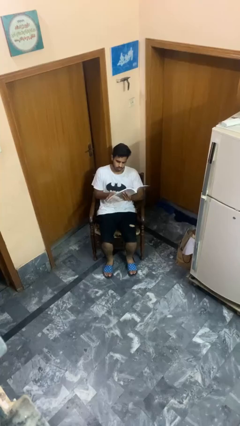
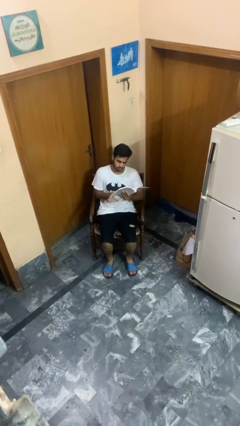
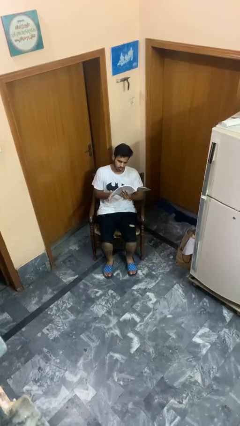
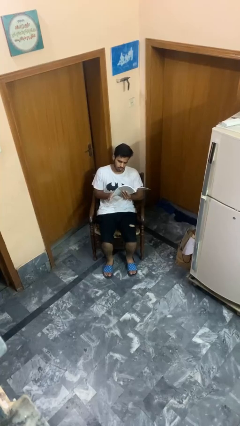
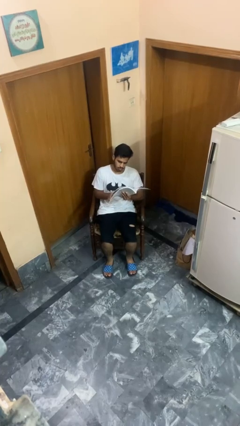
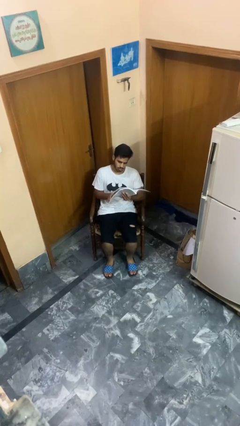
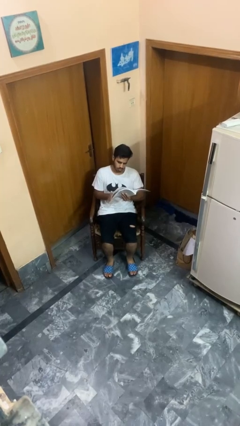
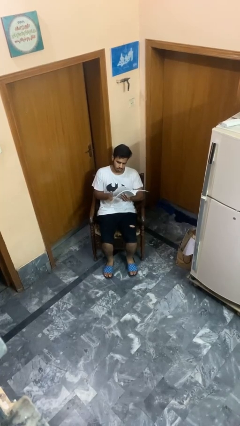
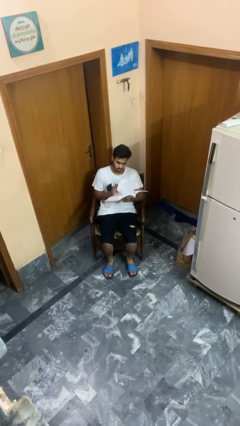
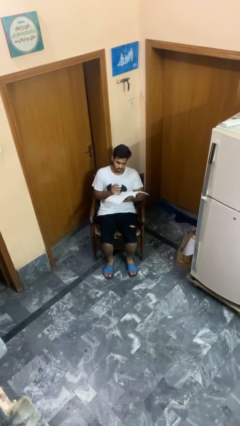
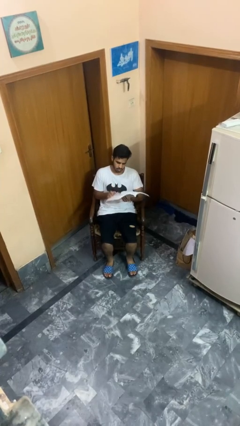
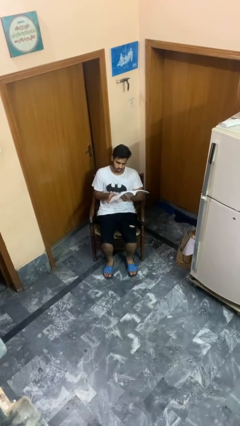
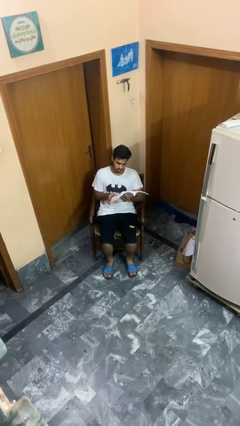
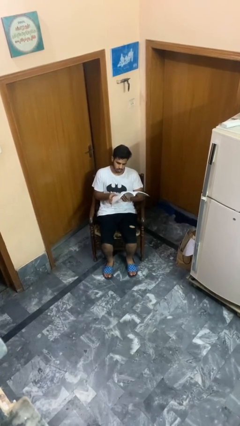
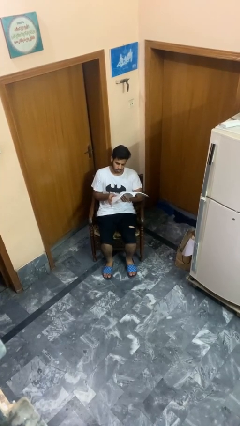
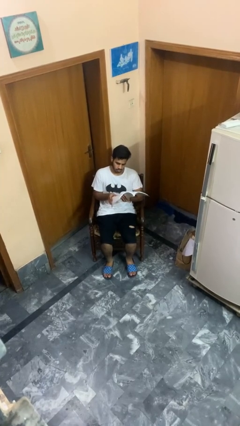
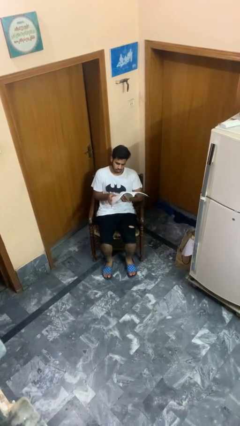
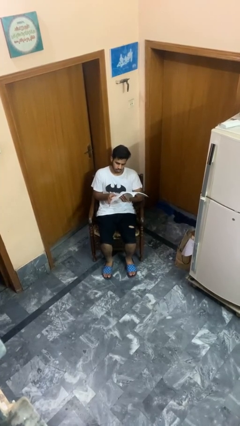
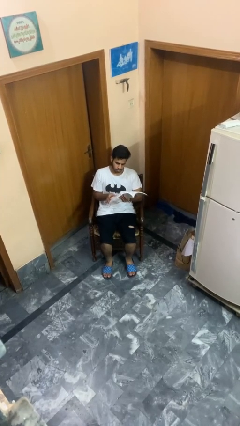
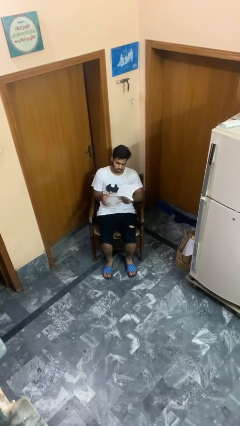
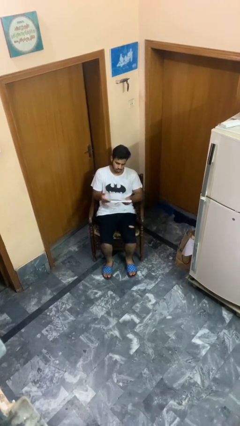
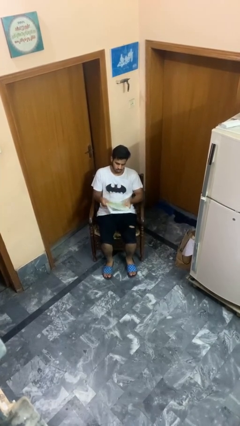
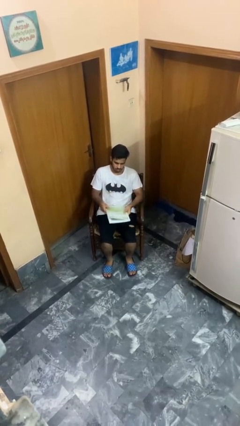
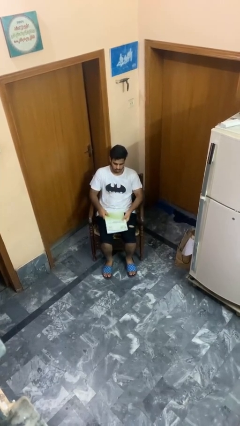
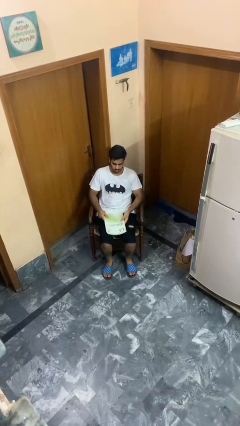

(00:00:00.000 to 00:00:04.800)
person reads book

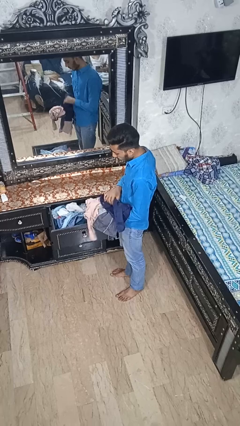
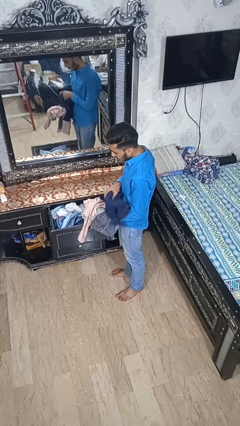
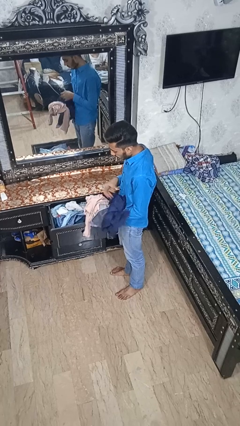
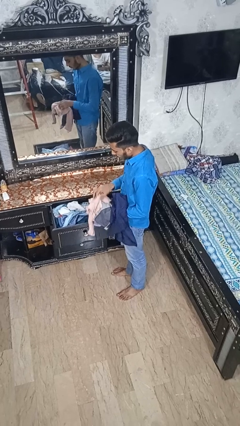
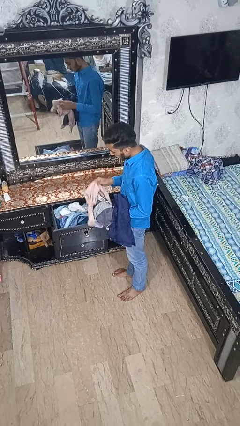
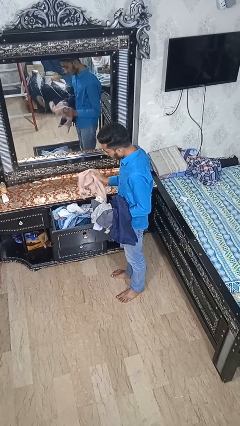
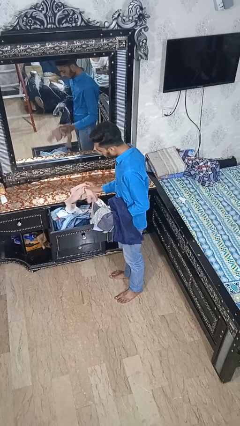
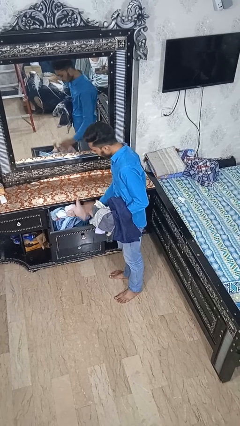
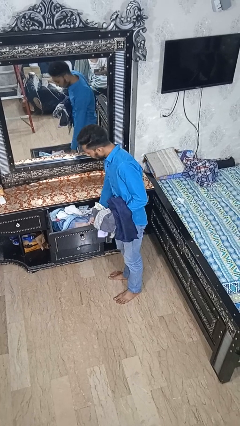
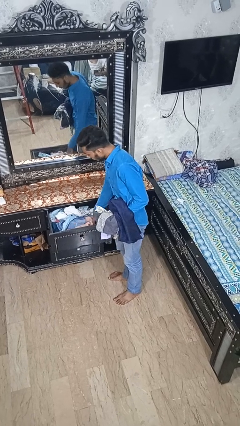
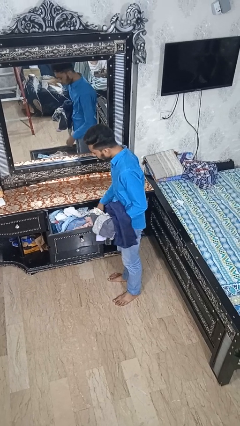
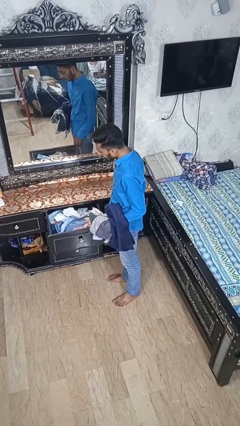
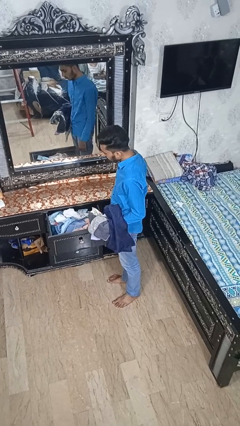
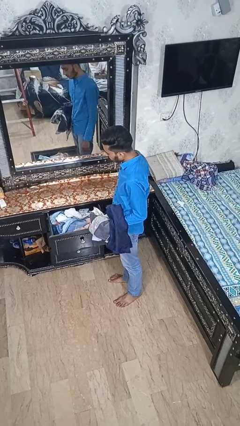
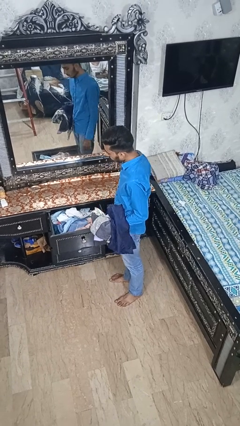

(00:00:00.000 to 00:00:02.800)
person puts clothes into dresser

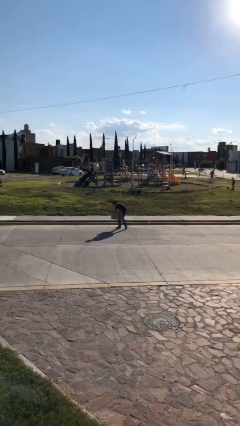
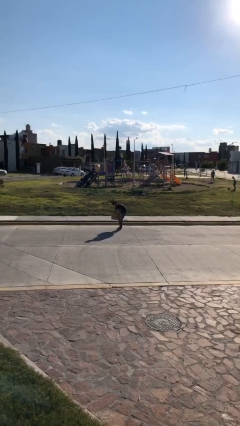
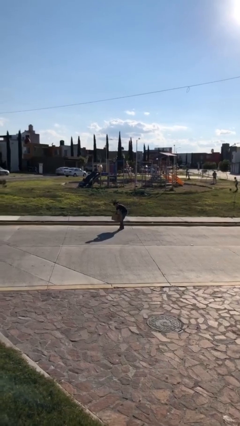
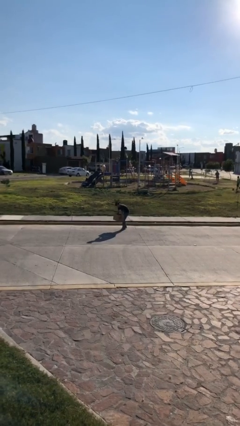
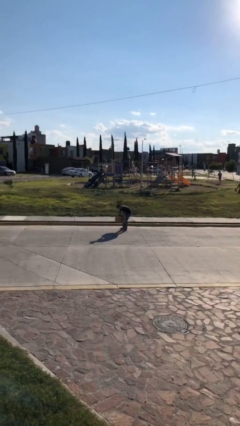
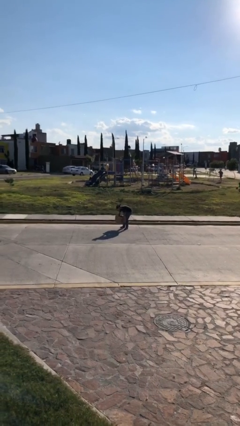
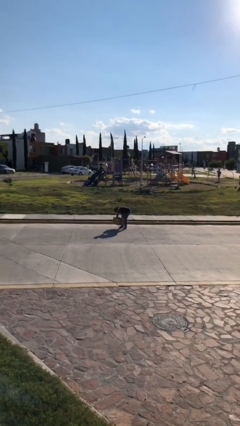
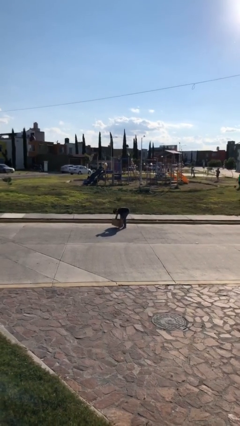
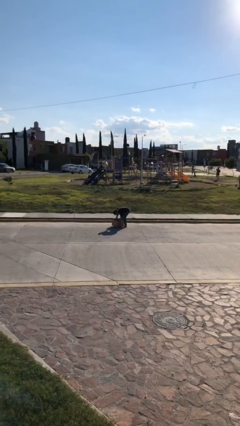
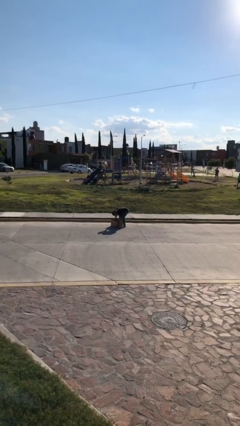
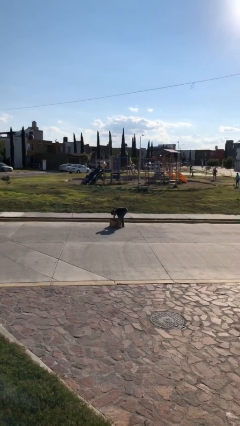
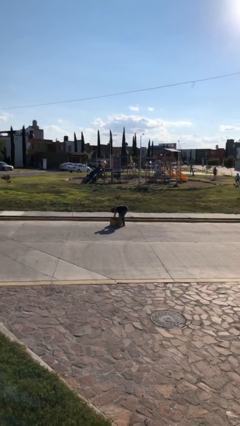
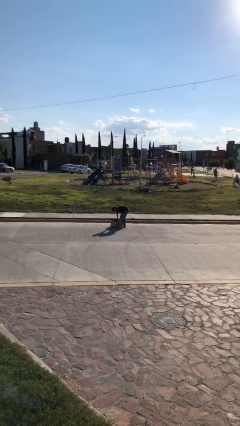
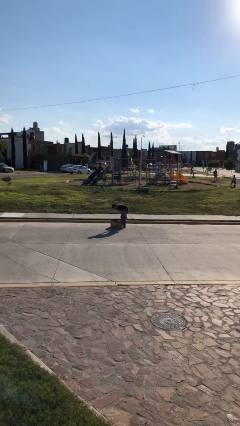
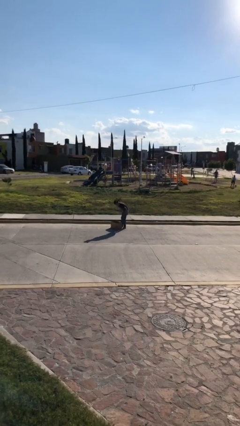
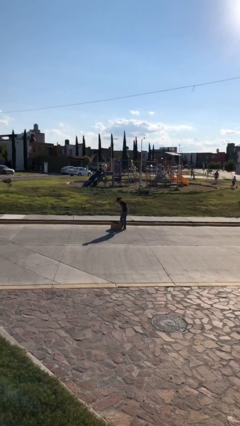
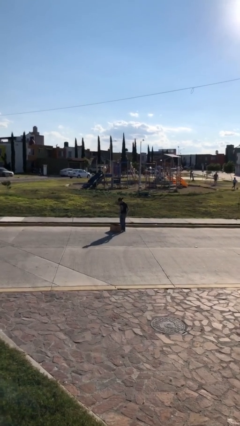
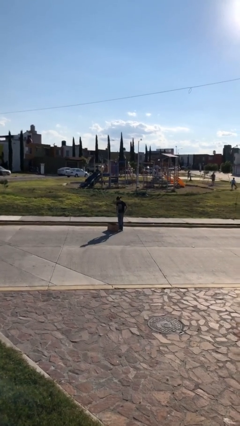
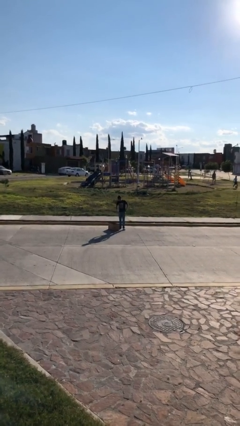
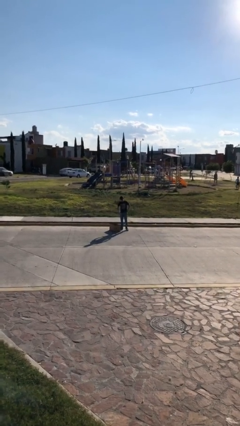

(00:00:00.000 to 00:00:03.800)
person puts down object on floor

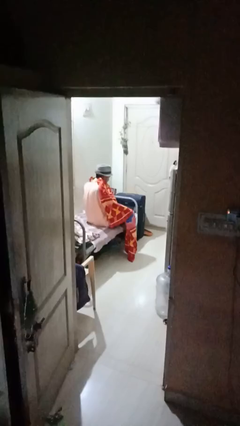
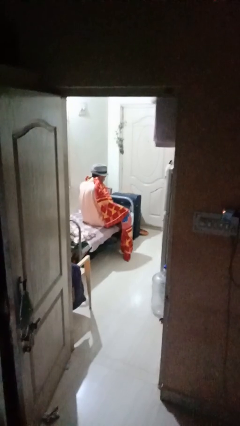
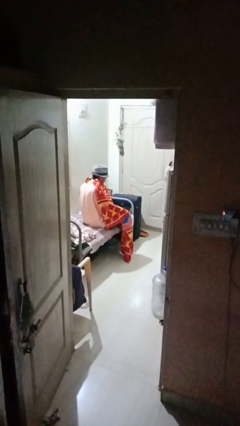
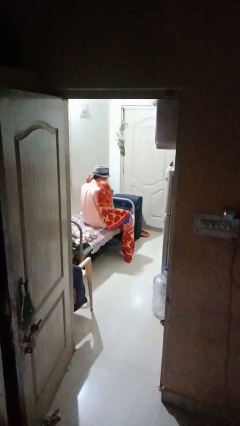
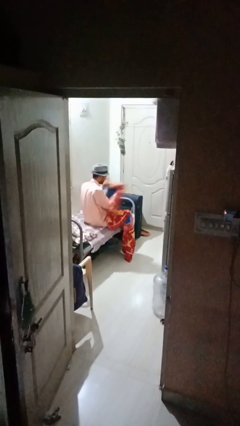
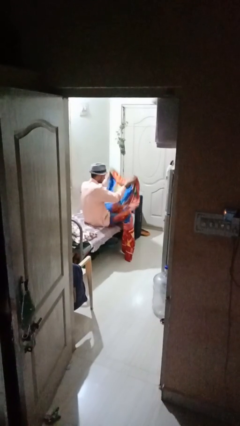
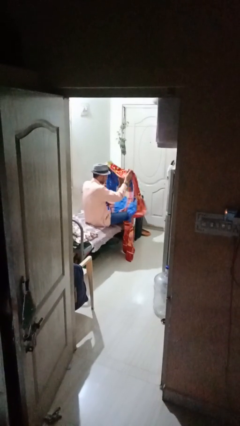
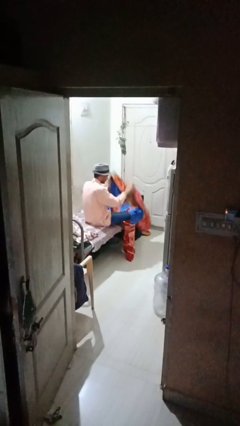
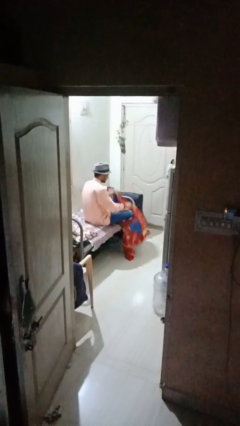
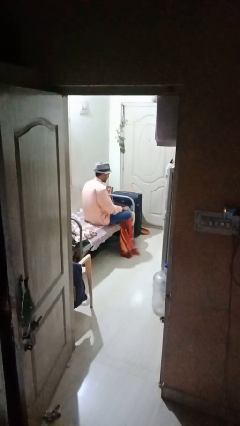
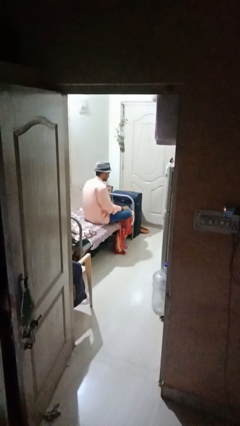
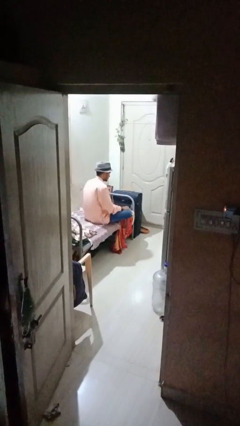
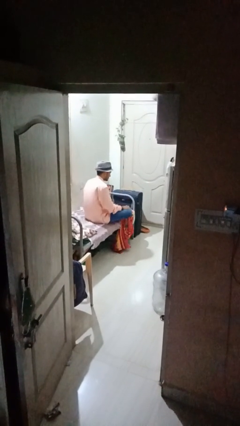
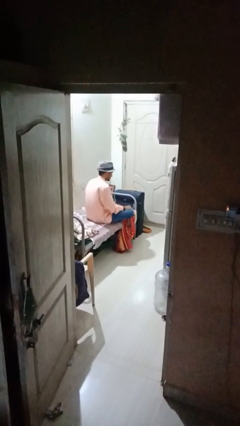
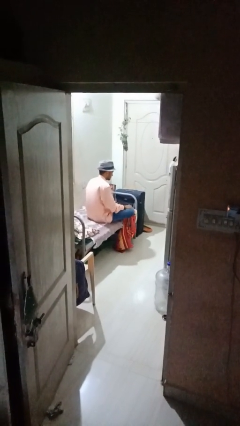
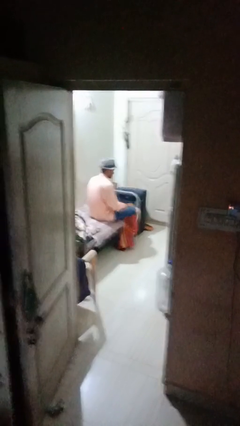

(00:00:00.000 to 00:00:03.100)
person uncovers with blanket

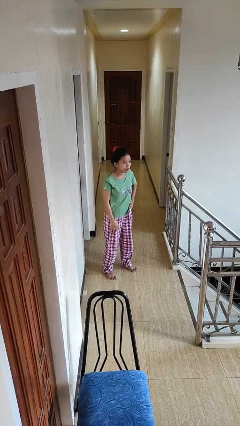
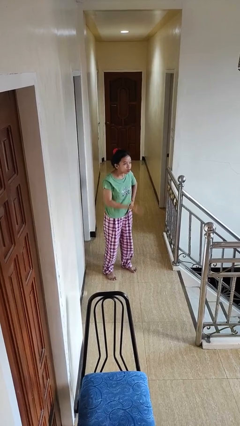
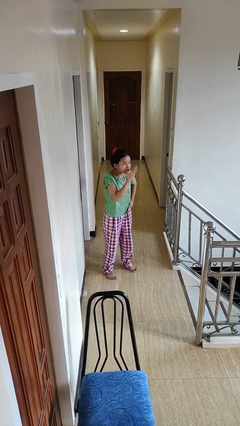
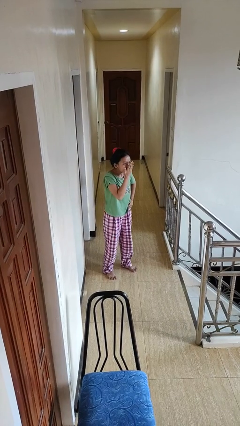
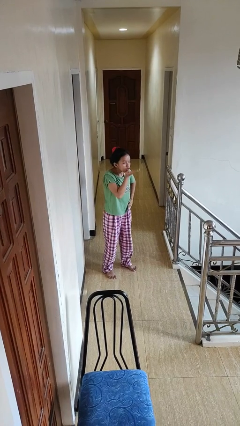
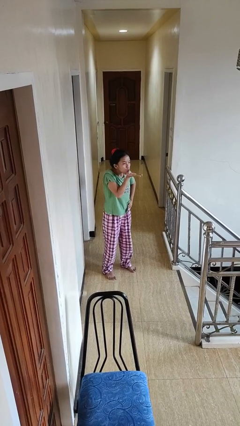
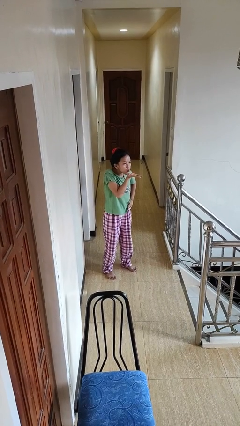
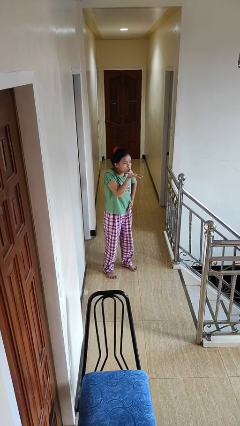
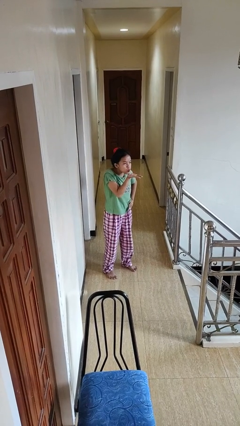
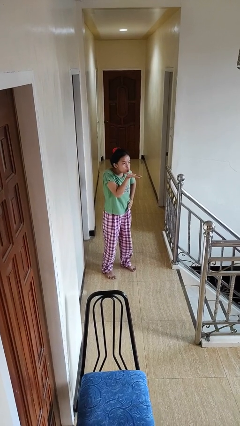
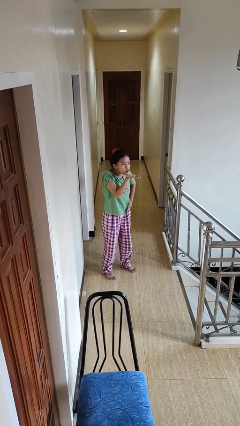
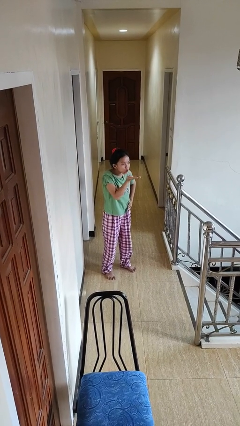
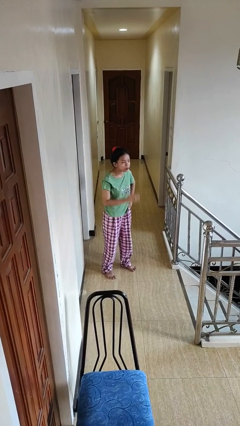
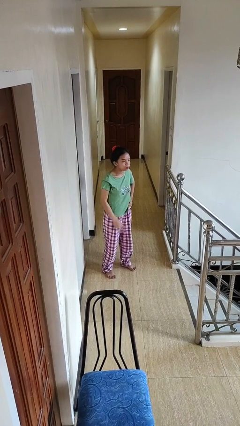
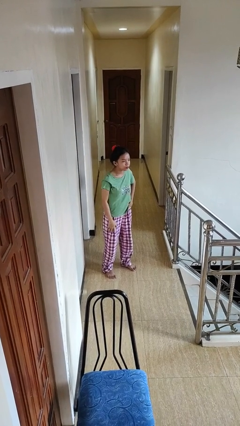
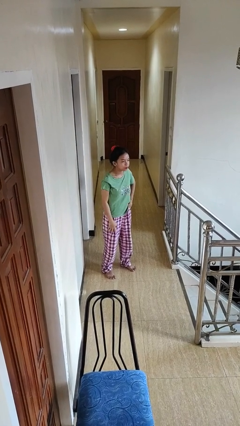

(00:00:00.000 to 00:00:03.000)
person gestures blow kiss
